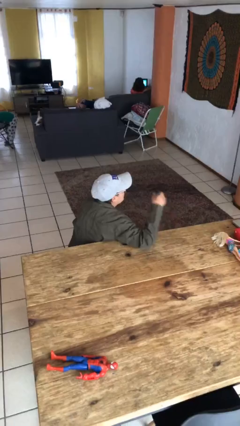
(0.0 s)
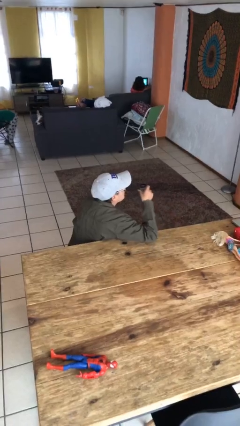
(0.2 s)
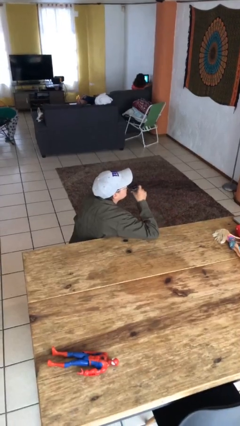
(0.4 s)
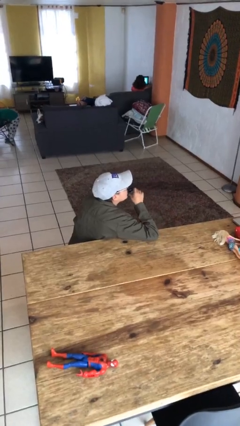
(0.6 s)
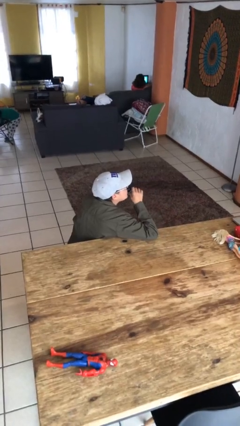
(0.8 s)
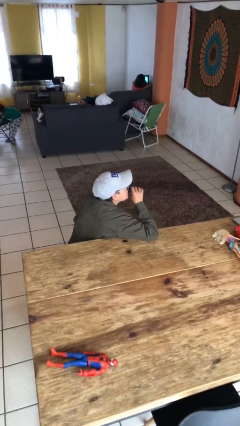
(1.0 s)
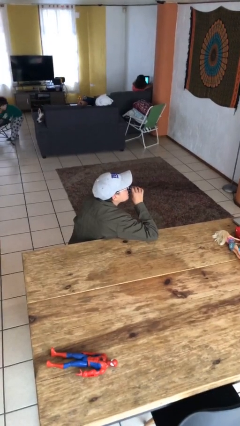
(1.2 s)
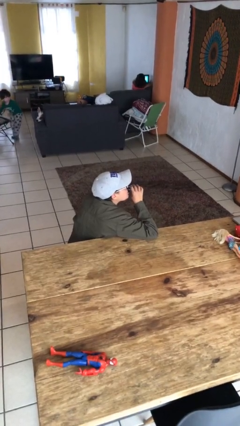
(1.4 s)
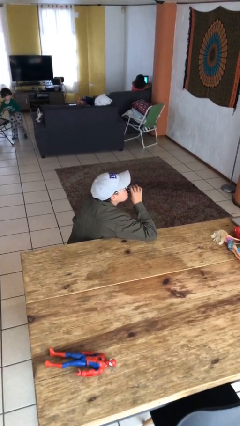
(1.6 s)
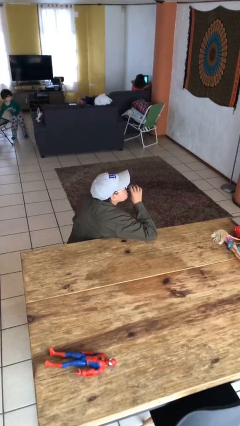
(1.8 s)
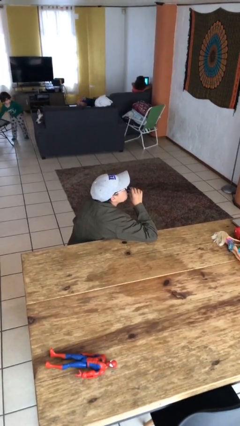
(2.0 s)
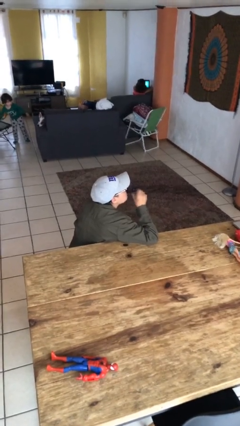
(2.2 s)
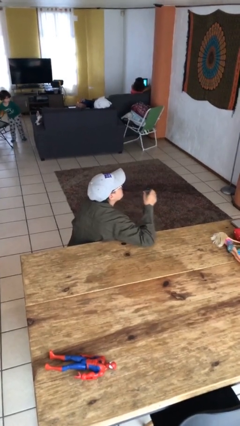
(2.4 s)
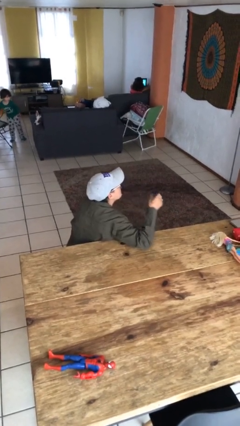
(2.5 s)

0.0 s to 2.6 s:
person drinks from shotglass

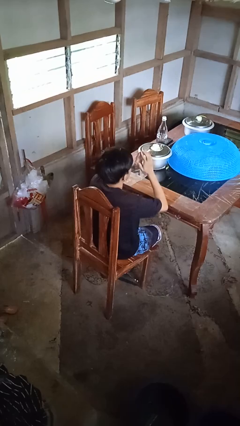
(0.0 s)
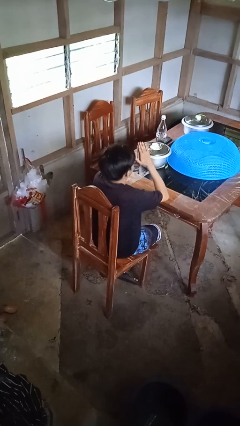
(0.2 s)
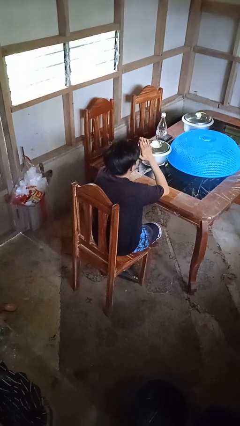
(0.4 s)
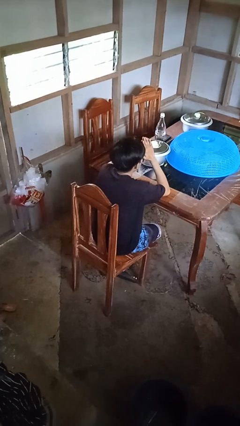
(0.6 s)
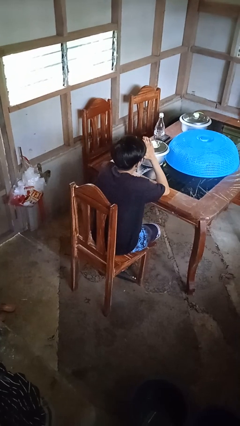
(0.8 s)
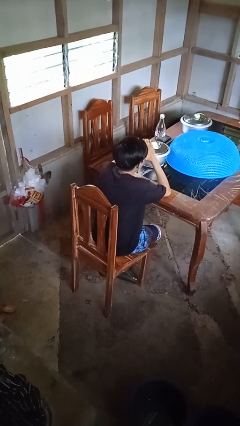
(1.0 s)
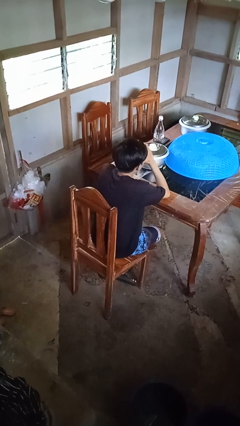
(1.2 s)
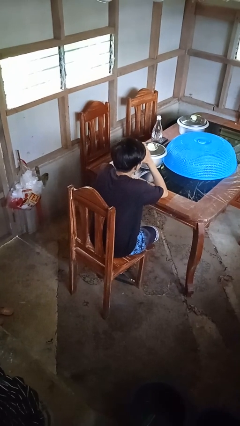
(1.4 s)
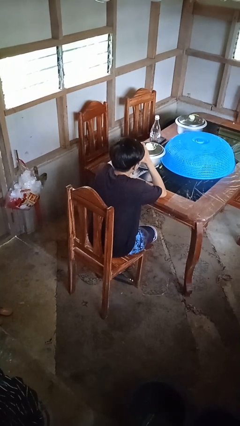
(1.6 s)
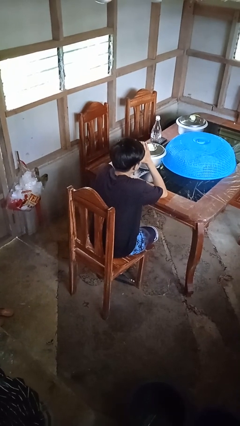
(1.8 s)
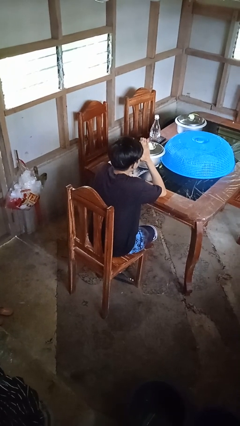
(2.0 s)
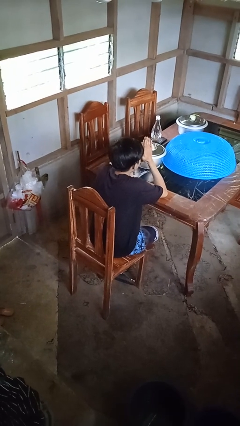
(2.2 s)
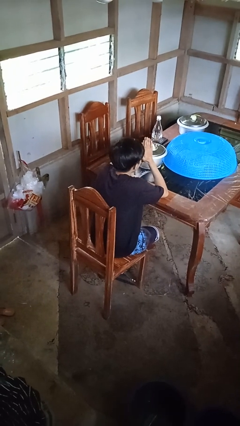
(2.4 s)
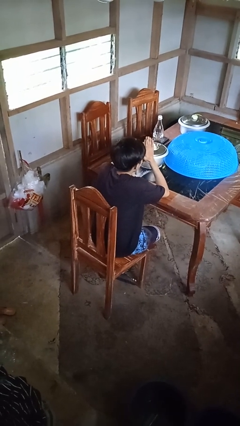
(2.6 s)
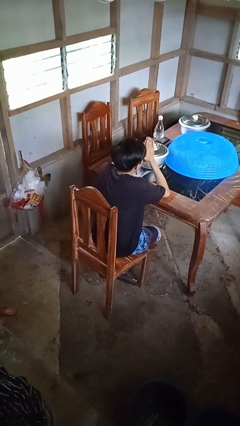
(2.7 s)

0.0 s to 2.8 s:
person prays

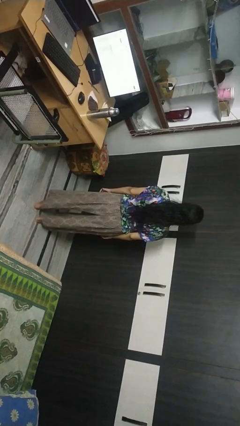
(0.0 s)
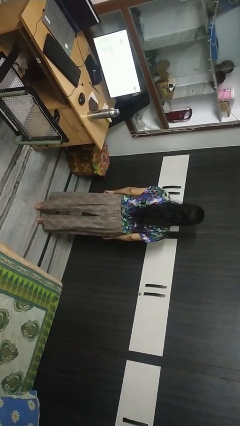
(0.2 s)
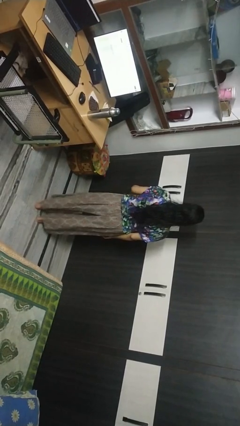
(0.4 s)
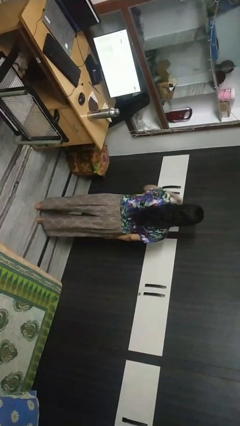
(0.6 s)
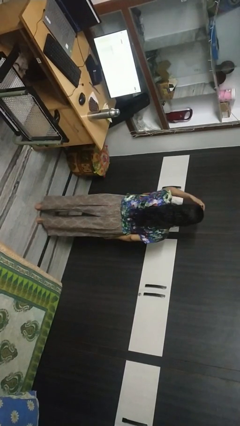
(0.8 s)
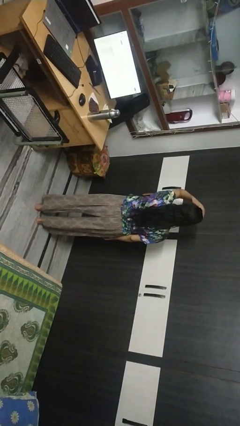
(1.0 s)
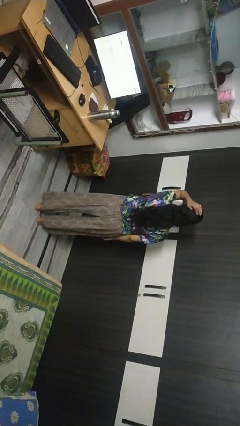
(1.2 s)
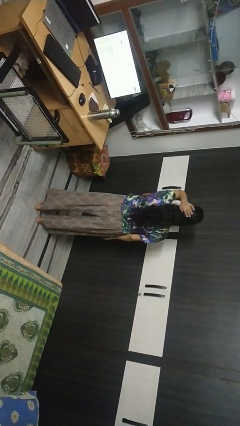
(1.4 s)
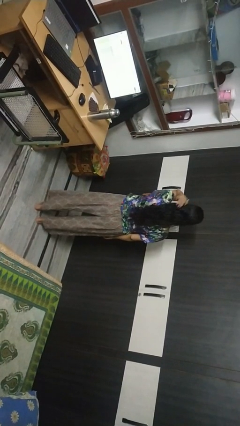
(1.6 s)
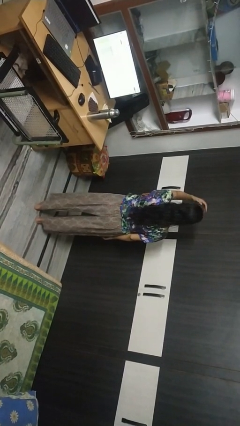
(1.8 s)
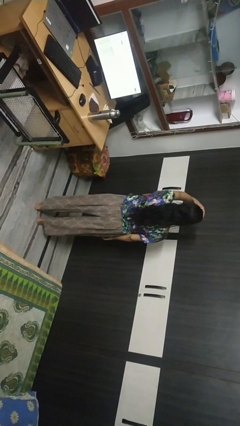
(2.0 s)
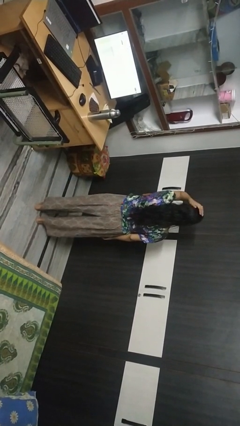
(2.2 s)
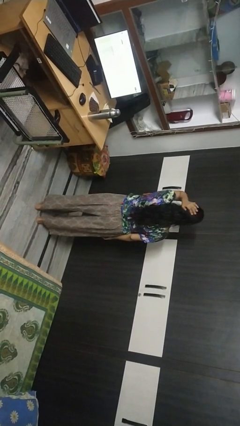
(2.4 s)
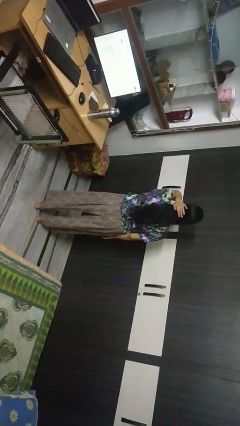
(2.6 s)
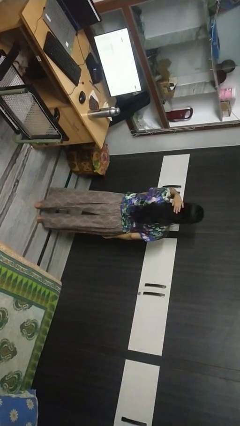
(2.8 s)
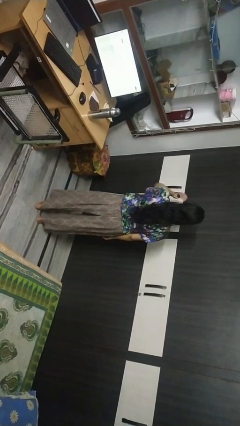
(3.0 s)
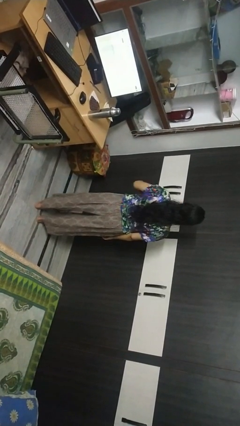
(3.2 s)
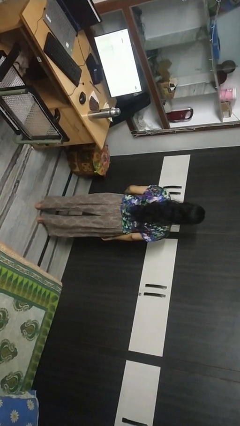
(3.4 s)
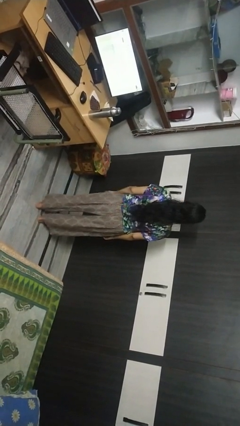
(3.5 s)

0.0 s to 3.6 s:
person pats head
